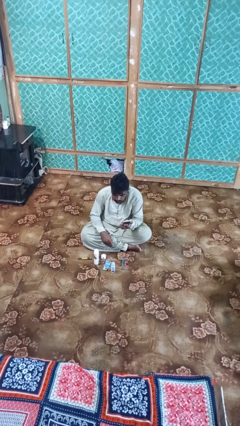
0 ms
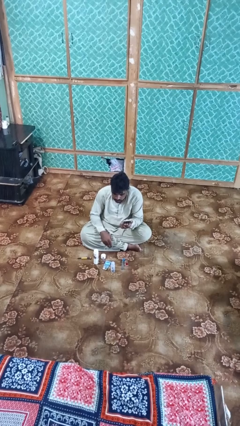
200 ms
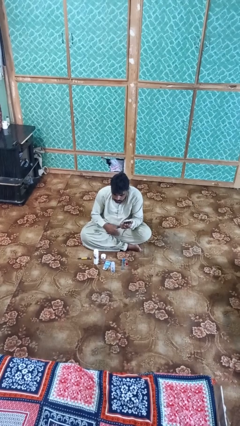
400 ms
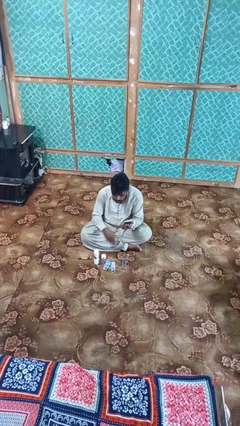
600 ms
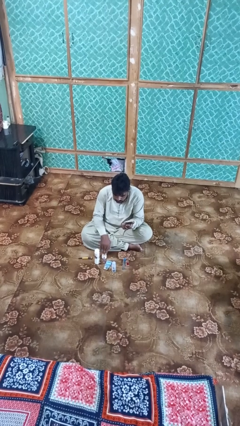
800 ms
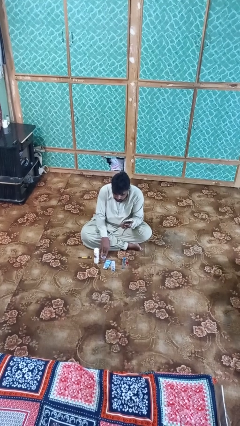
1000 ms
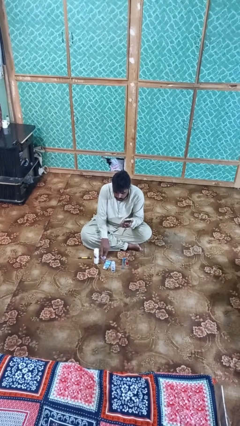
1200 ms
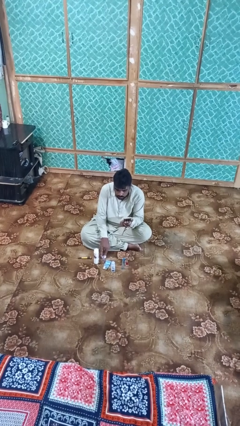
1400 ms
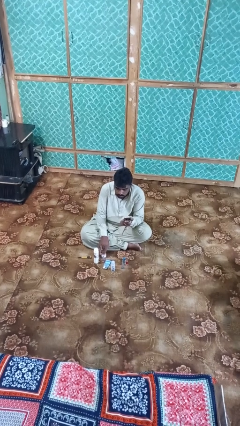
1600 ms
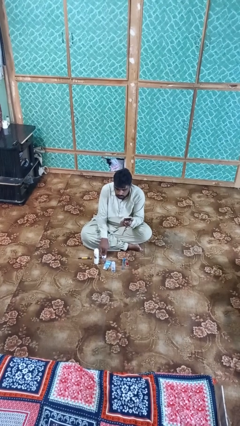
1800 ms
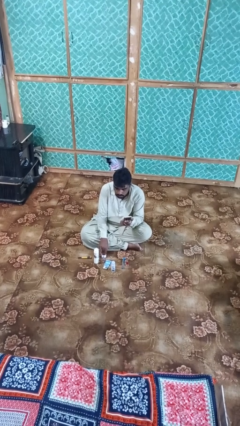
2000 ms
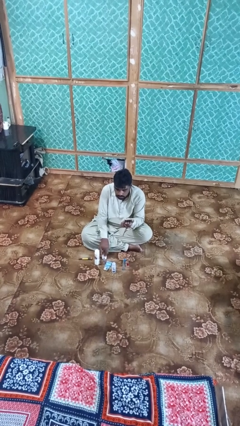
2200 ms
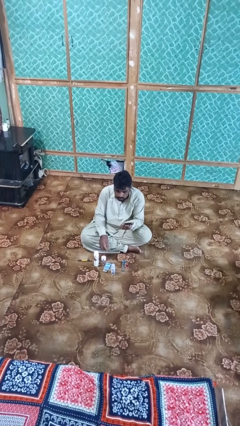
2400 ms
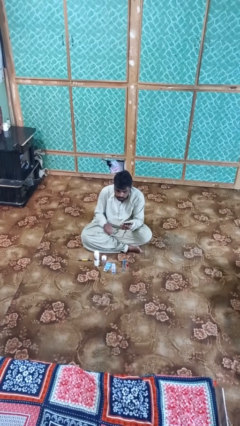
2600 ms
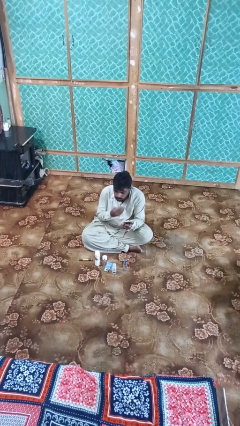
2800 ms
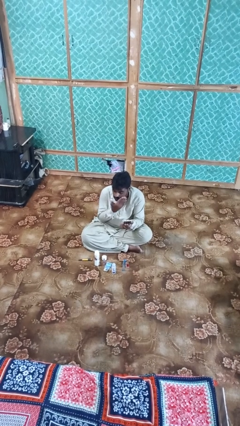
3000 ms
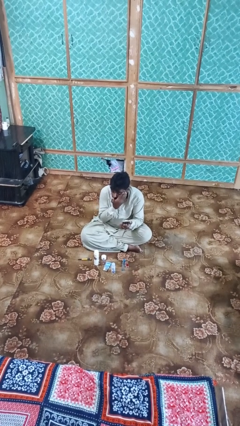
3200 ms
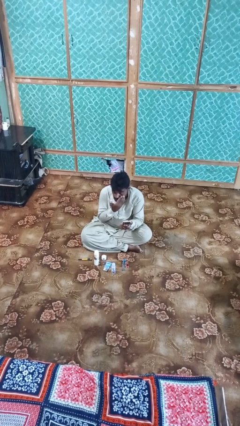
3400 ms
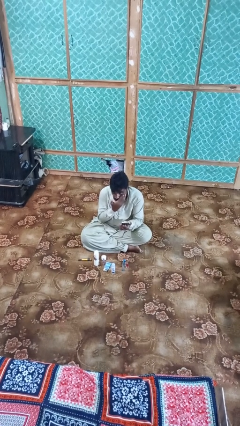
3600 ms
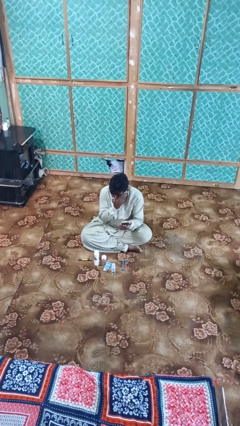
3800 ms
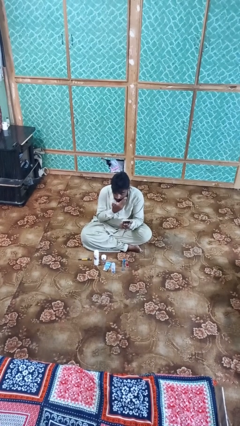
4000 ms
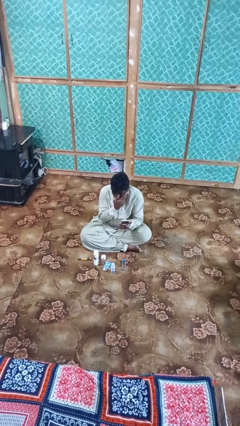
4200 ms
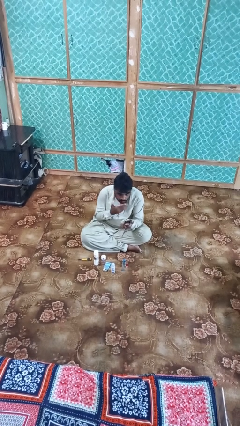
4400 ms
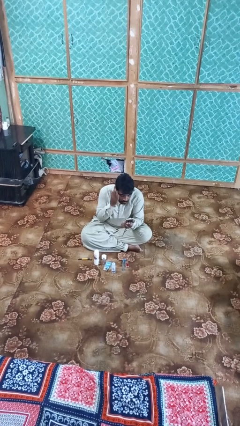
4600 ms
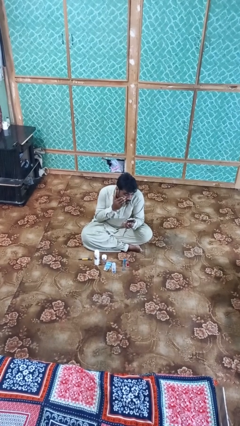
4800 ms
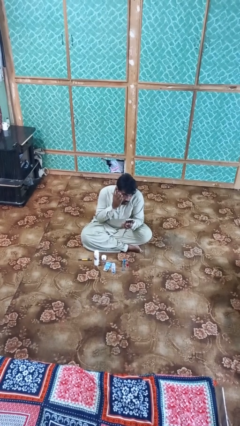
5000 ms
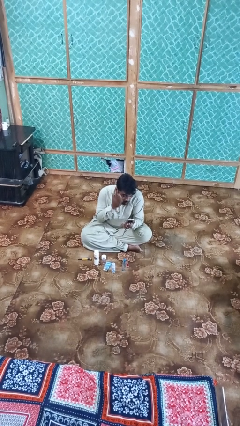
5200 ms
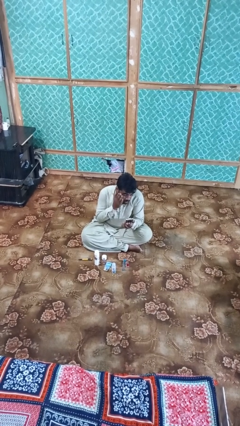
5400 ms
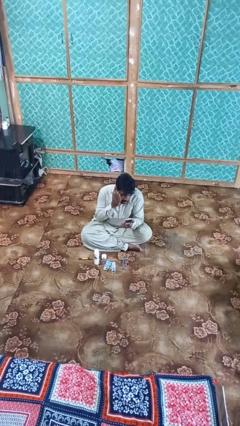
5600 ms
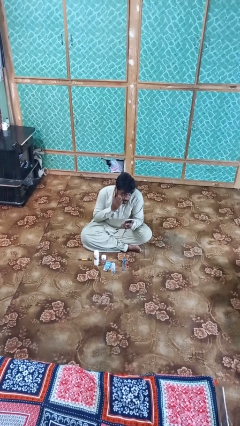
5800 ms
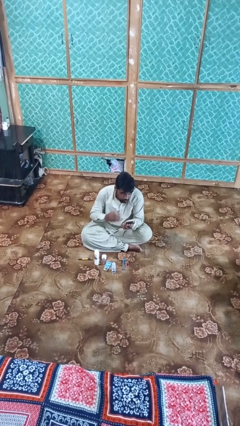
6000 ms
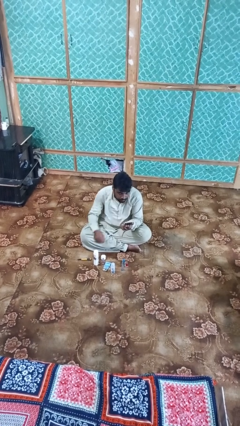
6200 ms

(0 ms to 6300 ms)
person applies foundation makeup

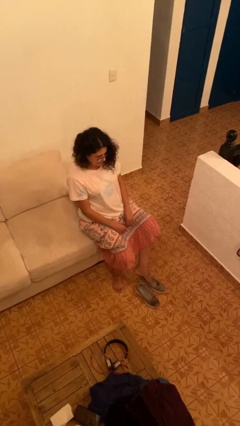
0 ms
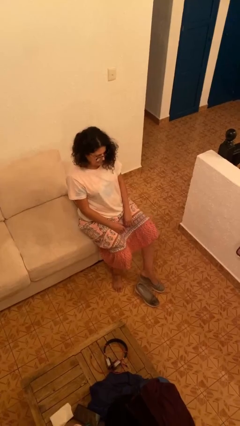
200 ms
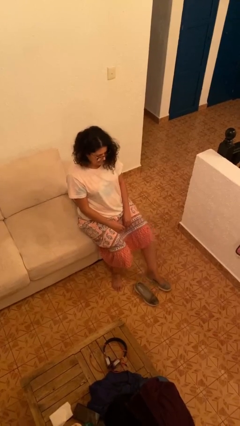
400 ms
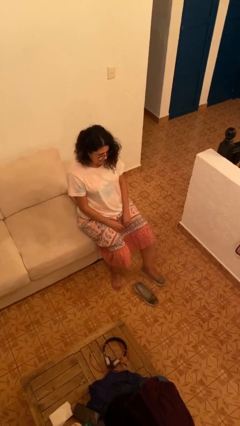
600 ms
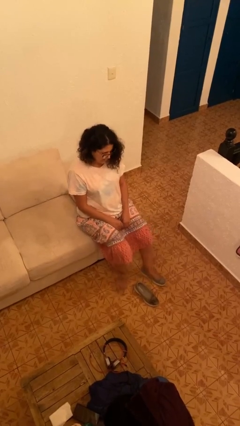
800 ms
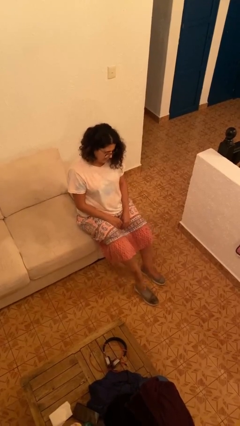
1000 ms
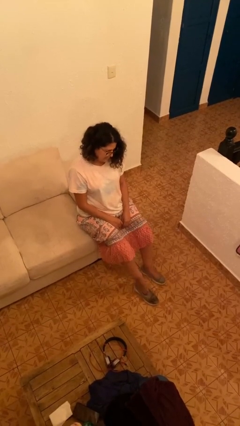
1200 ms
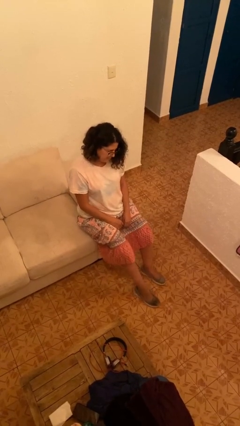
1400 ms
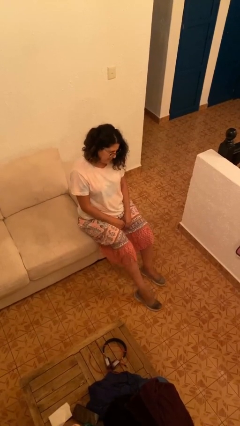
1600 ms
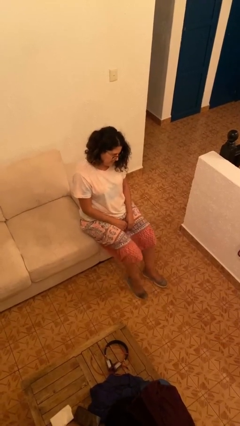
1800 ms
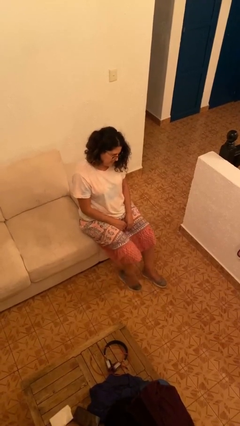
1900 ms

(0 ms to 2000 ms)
person puts on shoes

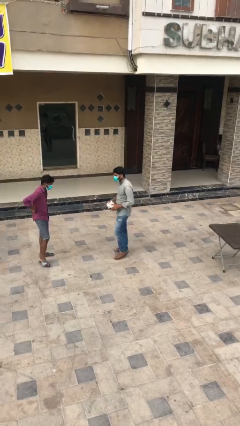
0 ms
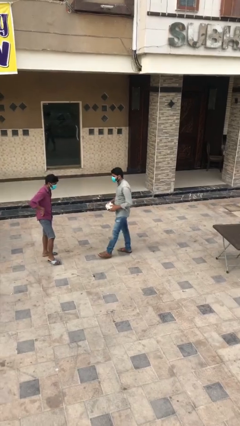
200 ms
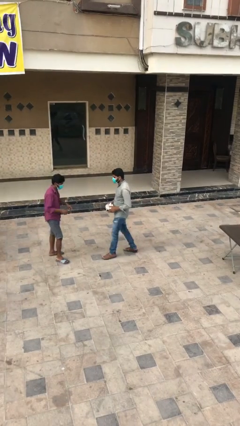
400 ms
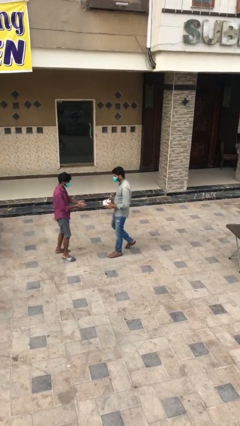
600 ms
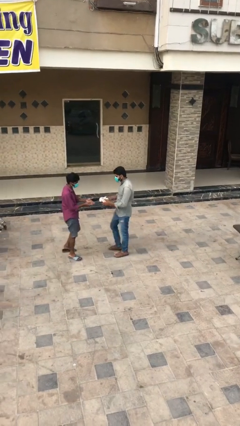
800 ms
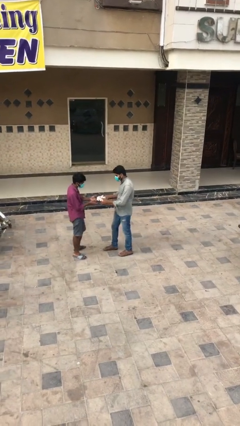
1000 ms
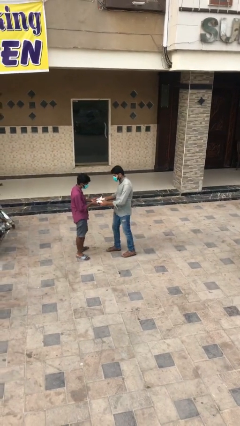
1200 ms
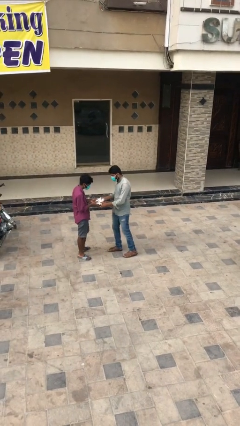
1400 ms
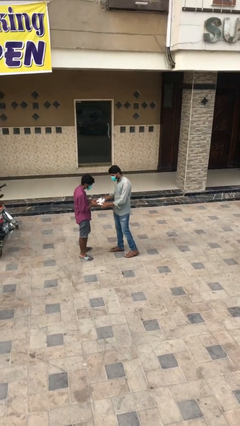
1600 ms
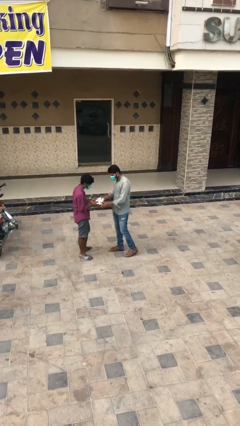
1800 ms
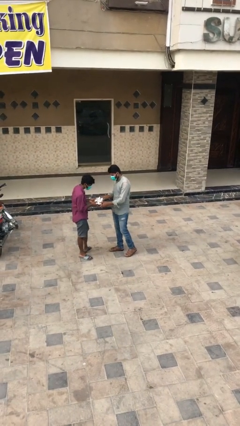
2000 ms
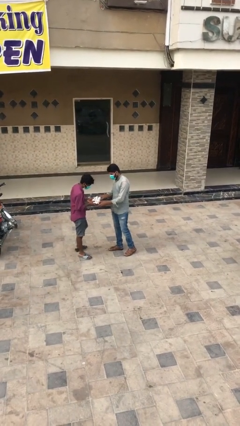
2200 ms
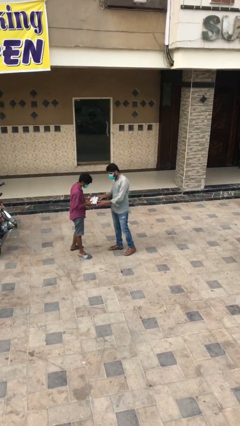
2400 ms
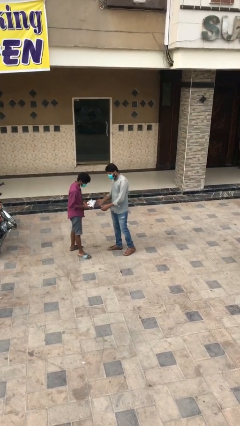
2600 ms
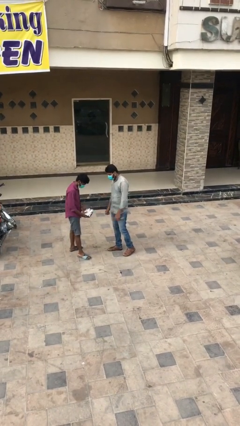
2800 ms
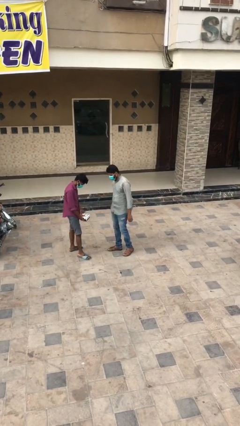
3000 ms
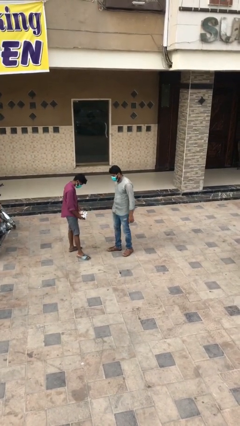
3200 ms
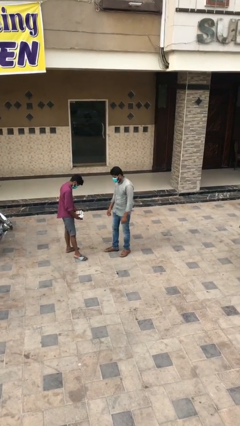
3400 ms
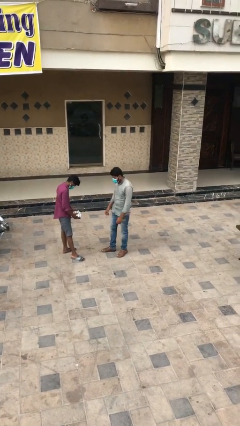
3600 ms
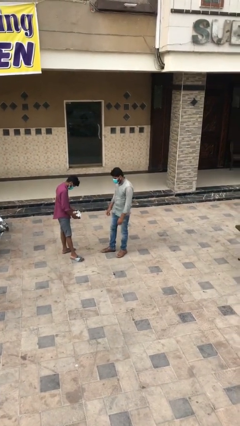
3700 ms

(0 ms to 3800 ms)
person transfers object to person

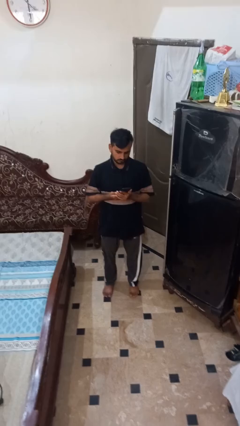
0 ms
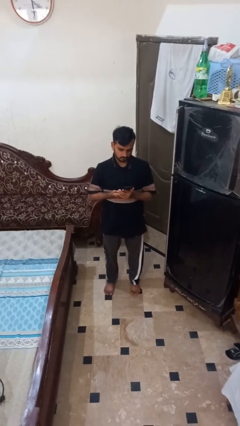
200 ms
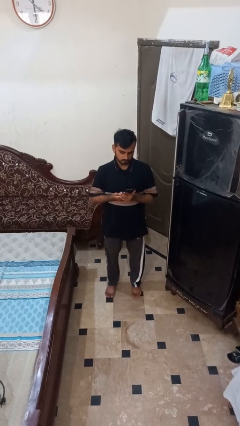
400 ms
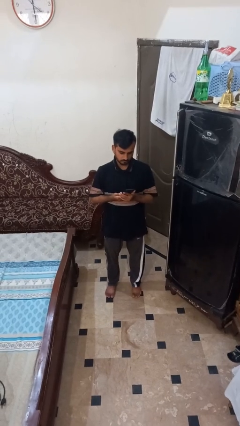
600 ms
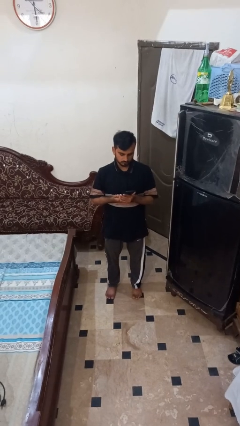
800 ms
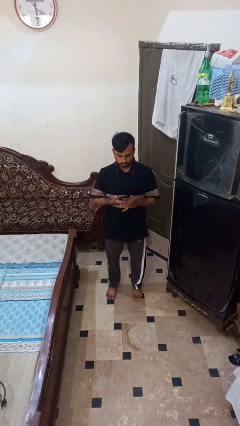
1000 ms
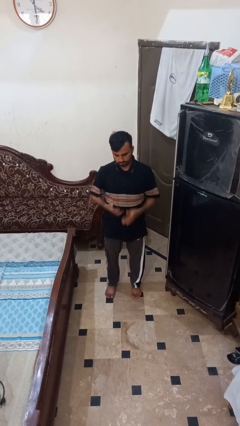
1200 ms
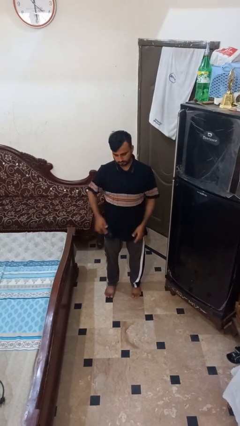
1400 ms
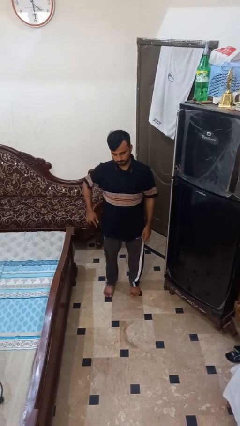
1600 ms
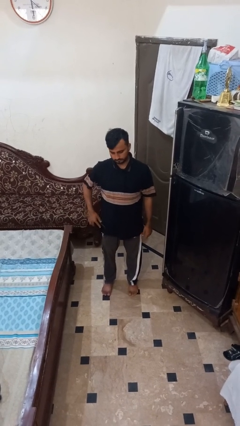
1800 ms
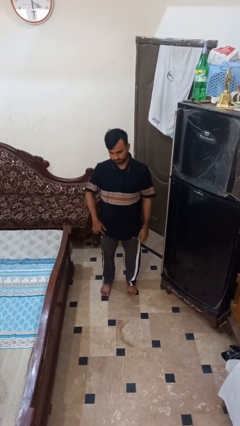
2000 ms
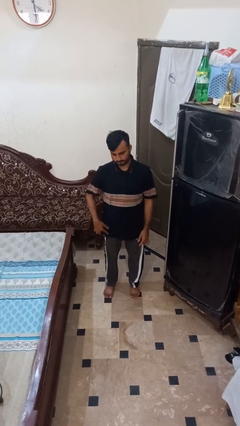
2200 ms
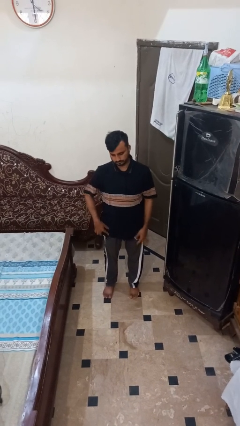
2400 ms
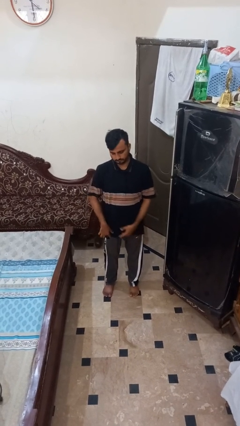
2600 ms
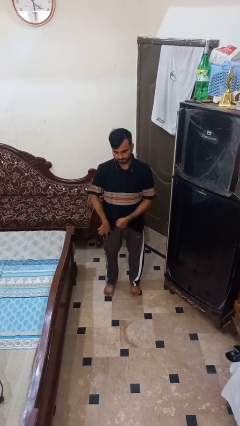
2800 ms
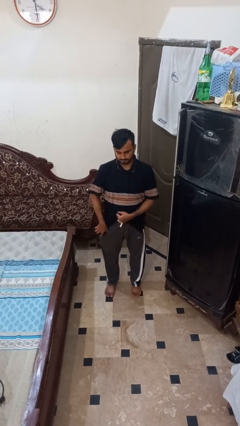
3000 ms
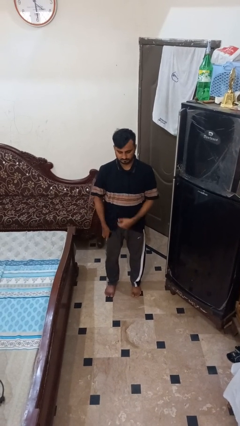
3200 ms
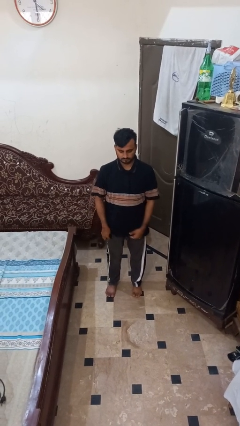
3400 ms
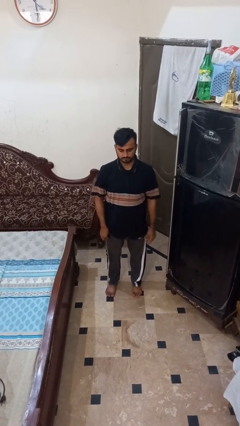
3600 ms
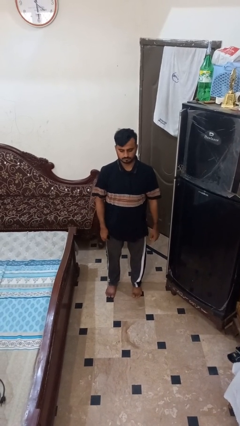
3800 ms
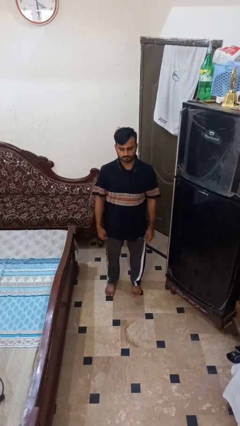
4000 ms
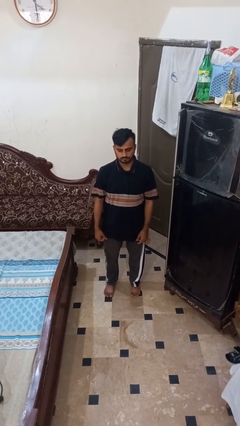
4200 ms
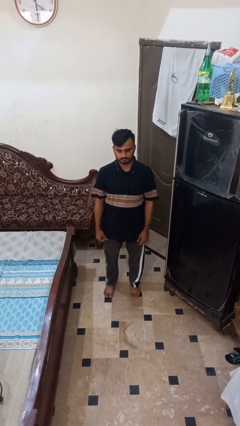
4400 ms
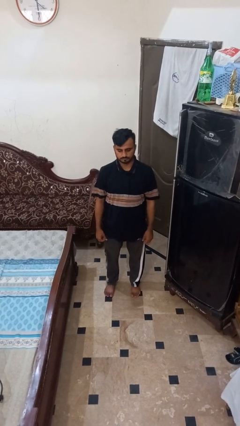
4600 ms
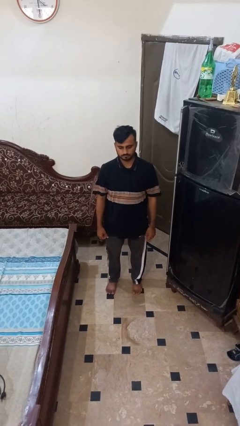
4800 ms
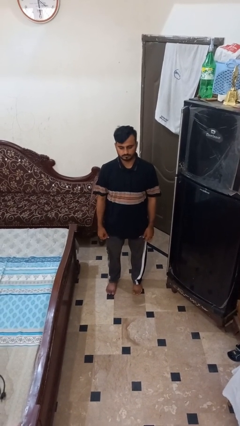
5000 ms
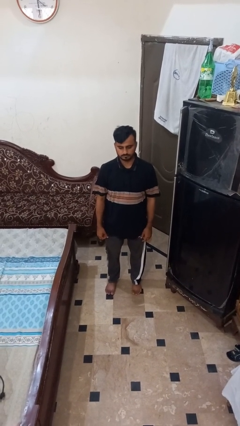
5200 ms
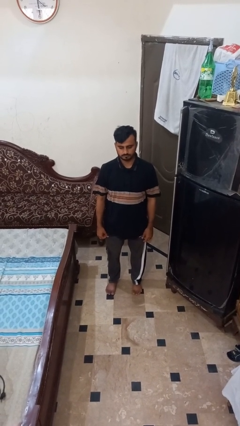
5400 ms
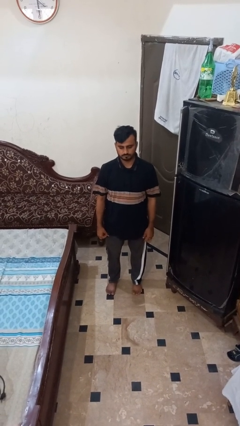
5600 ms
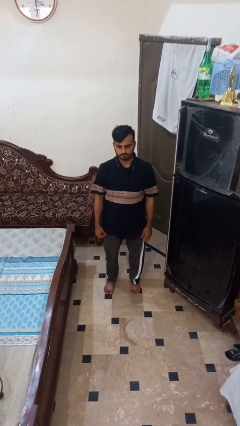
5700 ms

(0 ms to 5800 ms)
person puts phone into pocket

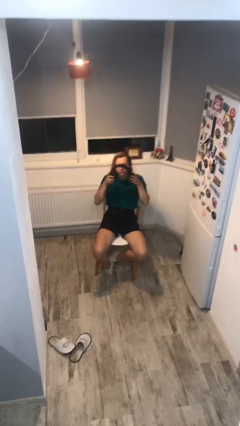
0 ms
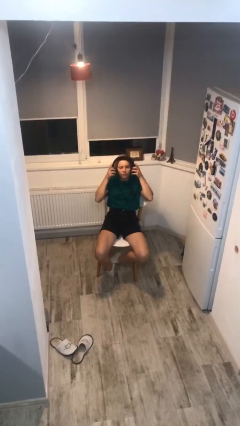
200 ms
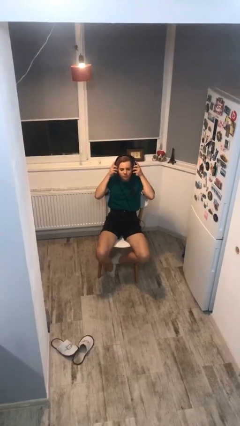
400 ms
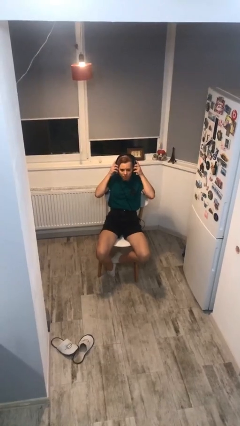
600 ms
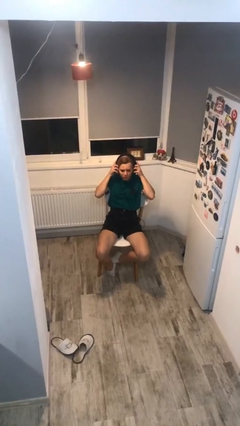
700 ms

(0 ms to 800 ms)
person puts on headphones
